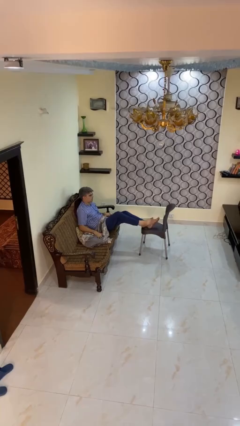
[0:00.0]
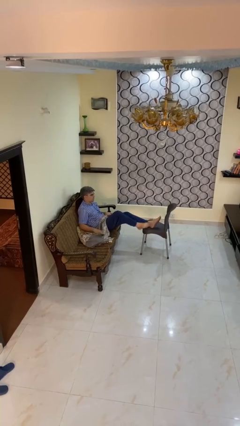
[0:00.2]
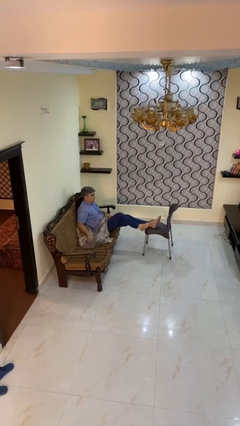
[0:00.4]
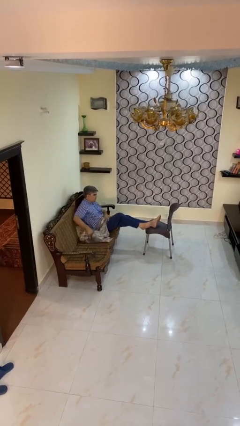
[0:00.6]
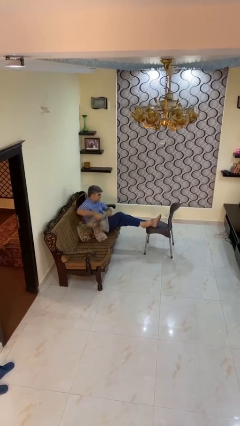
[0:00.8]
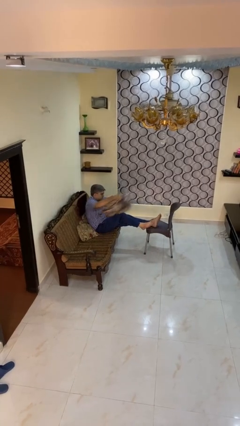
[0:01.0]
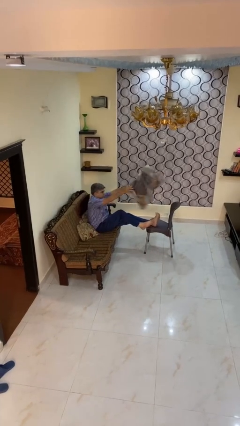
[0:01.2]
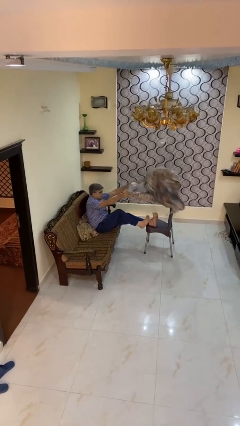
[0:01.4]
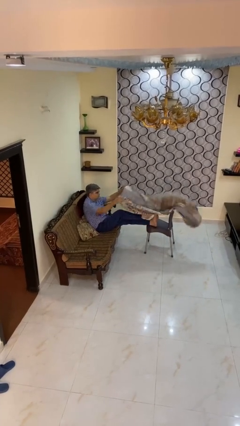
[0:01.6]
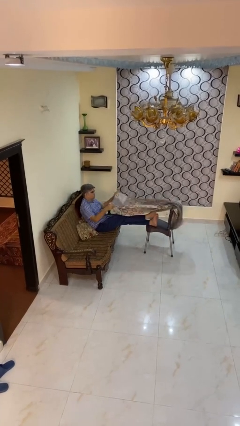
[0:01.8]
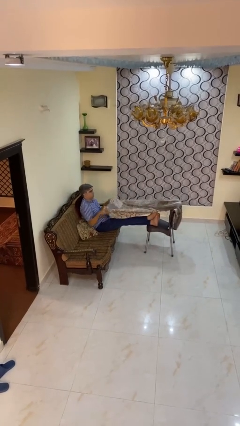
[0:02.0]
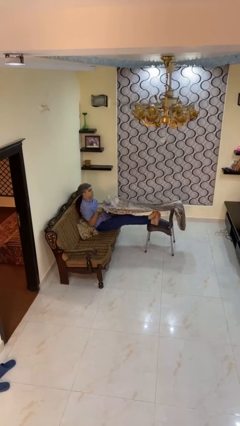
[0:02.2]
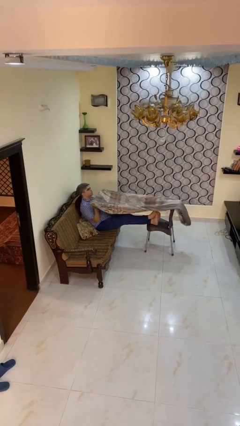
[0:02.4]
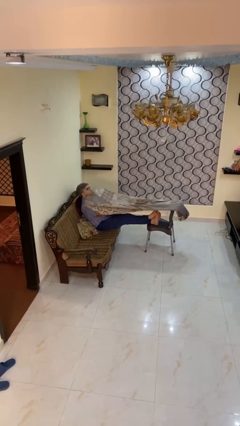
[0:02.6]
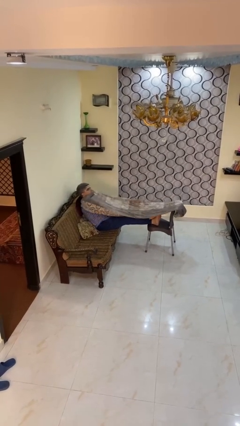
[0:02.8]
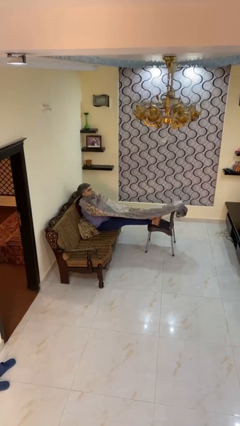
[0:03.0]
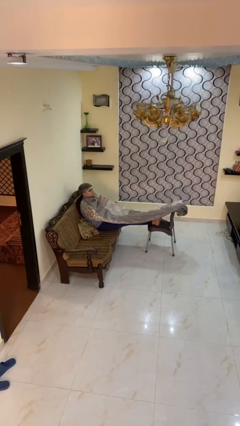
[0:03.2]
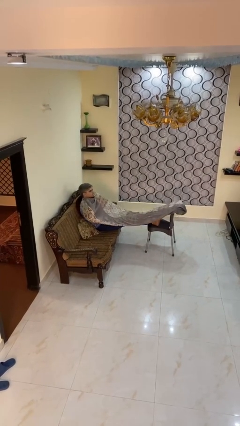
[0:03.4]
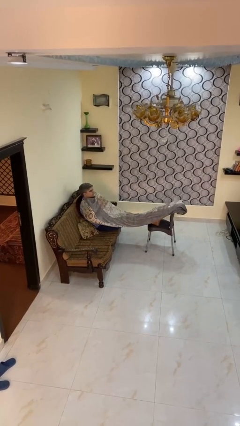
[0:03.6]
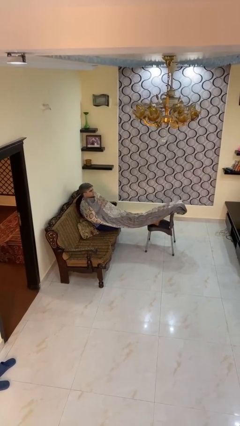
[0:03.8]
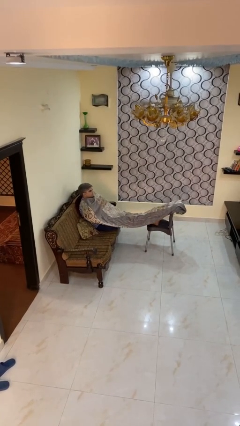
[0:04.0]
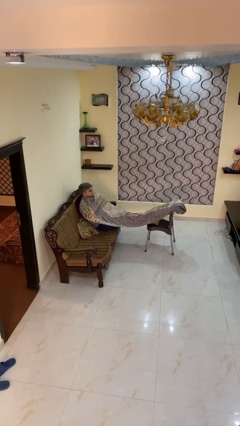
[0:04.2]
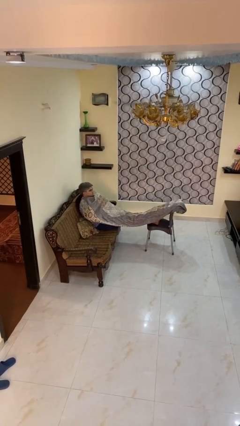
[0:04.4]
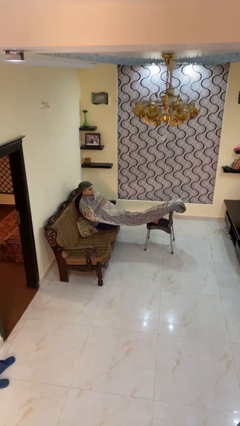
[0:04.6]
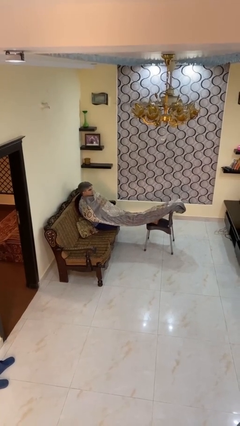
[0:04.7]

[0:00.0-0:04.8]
person covers with blanket

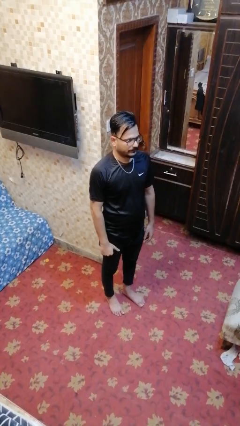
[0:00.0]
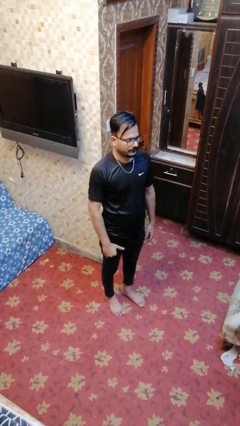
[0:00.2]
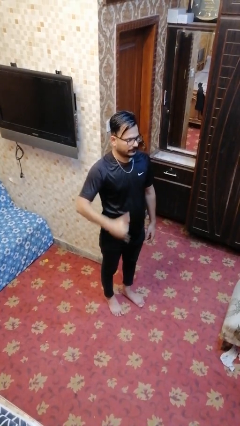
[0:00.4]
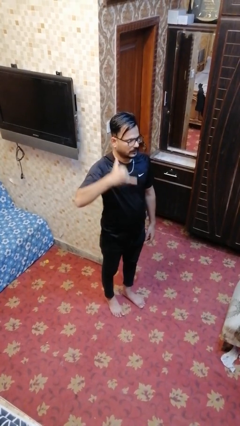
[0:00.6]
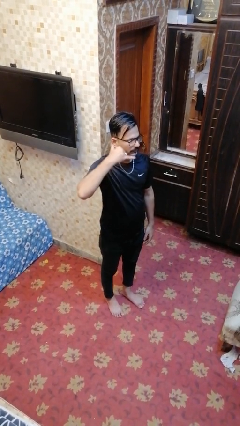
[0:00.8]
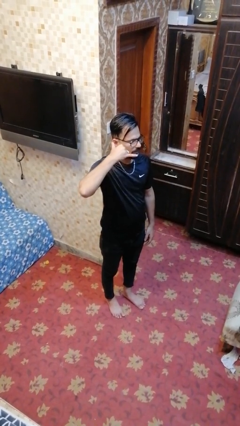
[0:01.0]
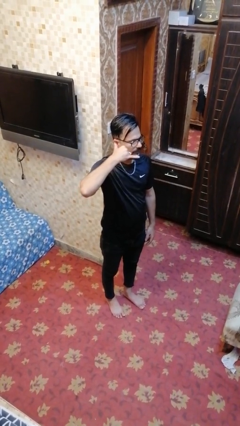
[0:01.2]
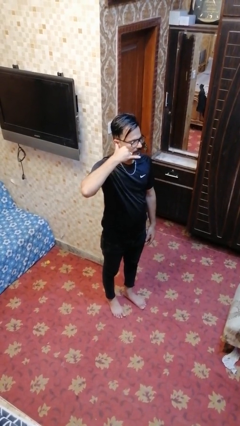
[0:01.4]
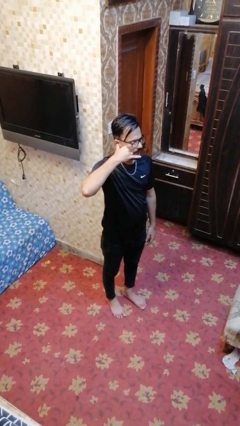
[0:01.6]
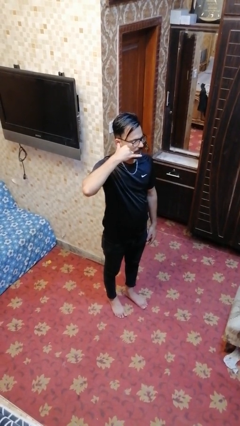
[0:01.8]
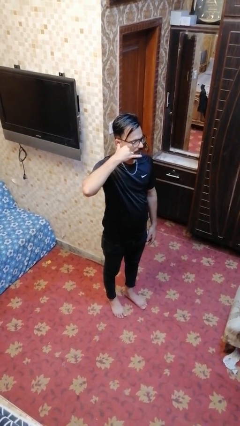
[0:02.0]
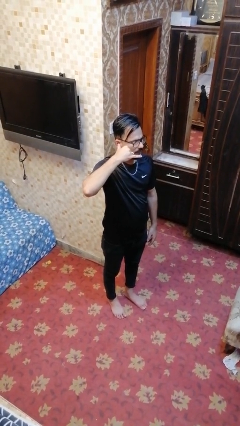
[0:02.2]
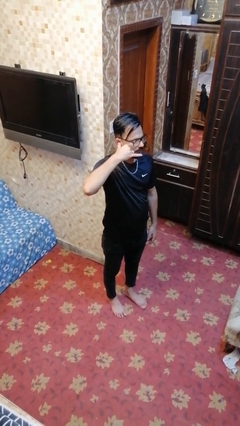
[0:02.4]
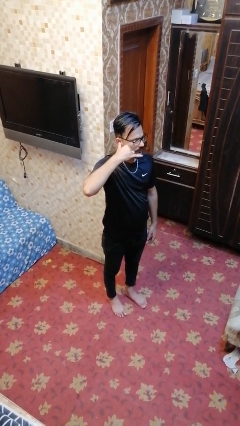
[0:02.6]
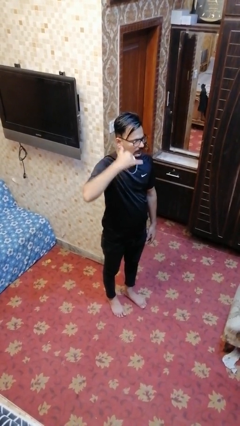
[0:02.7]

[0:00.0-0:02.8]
person gestures call me

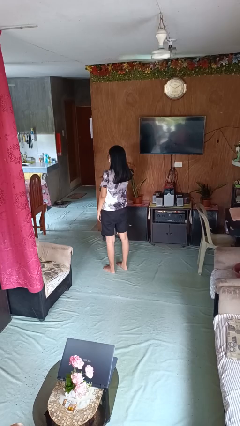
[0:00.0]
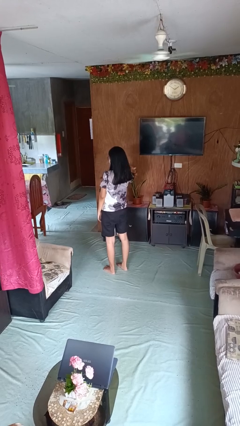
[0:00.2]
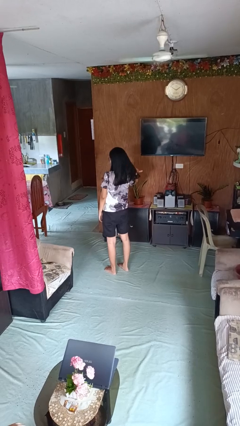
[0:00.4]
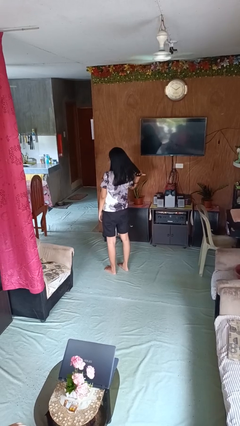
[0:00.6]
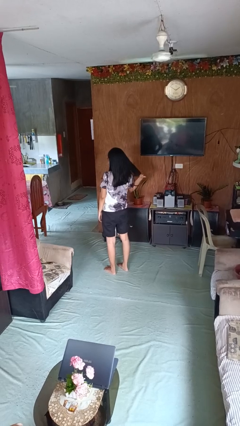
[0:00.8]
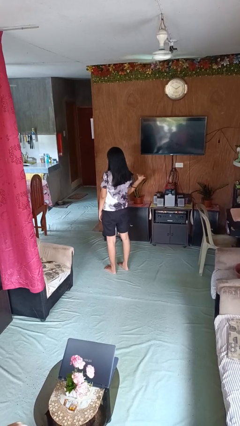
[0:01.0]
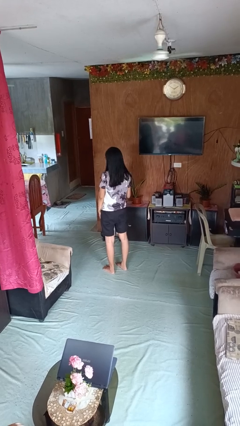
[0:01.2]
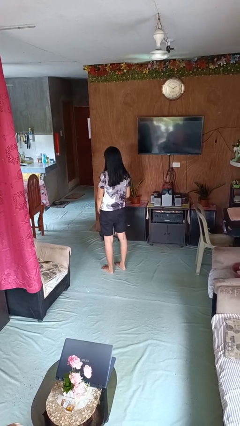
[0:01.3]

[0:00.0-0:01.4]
person strokes hair

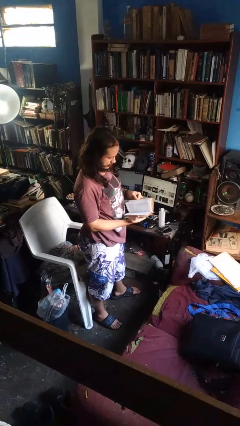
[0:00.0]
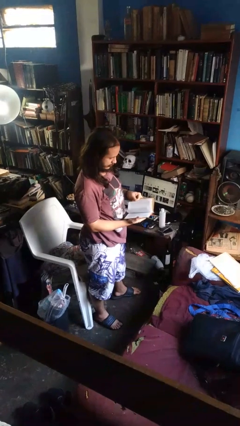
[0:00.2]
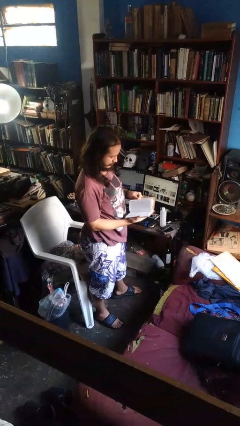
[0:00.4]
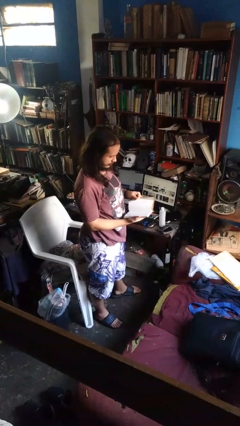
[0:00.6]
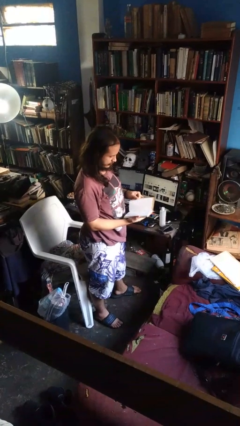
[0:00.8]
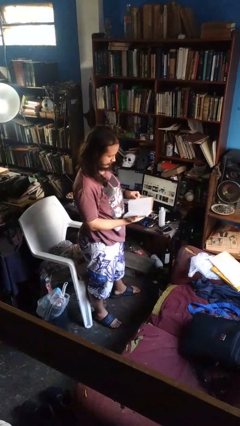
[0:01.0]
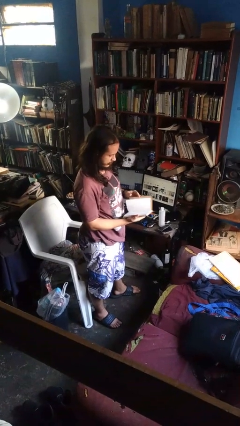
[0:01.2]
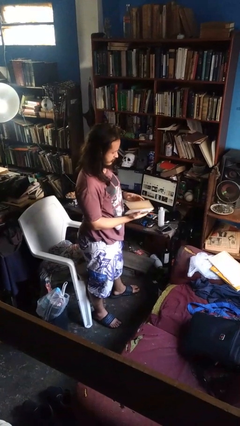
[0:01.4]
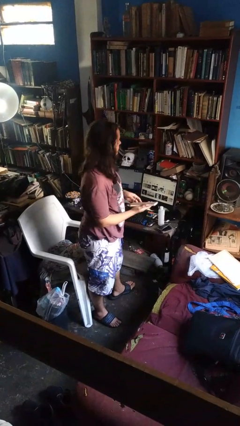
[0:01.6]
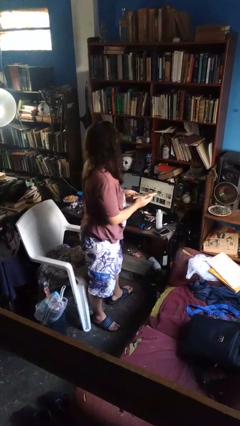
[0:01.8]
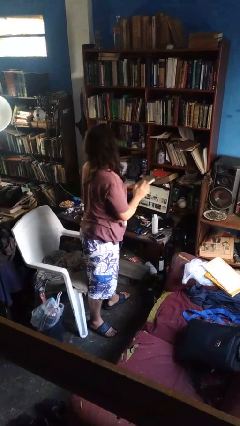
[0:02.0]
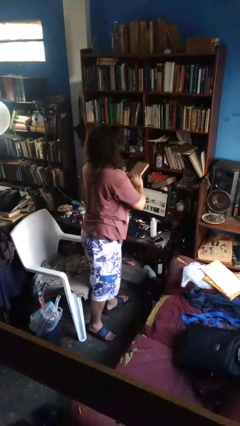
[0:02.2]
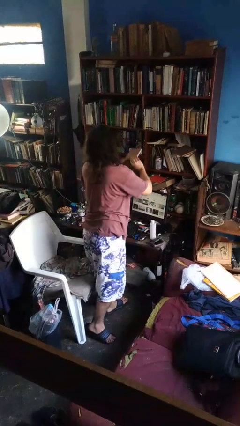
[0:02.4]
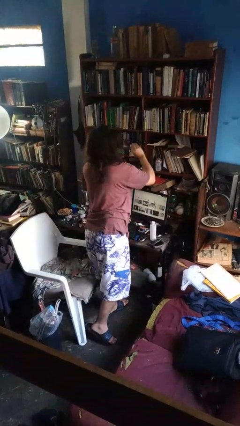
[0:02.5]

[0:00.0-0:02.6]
person puts down object on shelf

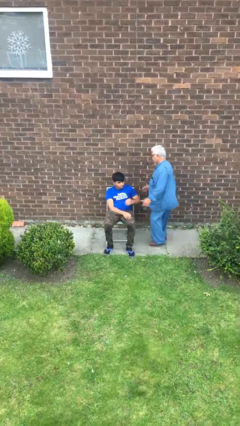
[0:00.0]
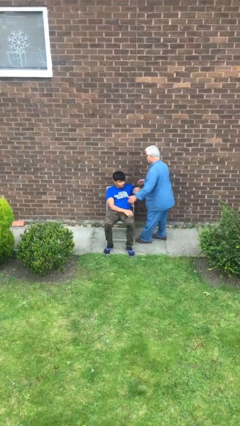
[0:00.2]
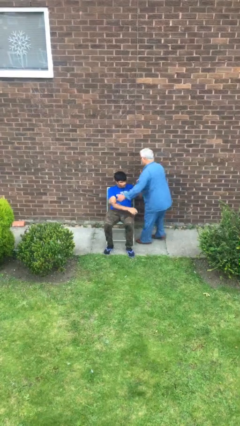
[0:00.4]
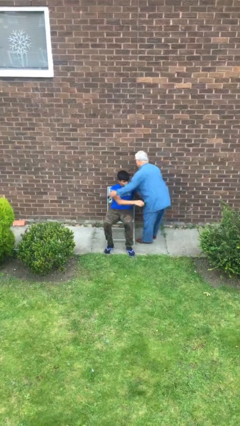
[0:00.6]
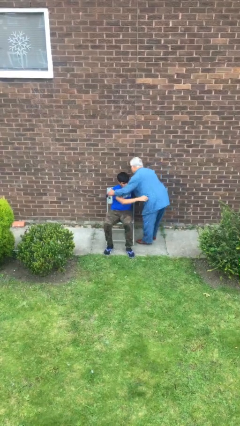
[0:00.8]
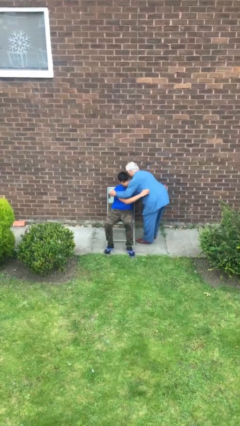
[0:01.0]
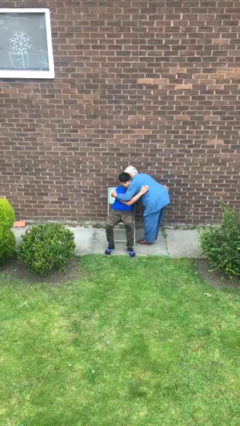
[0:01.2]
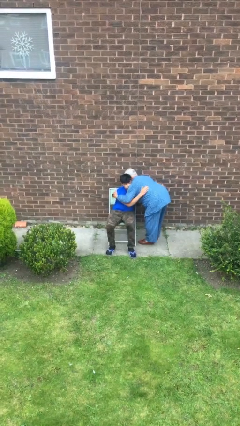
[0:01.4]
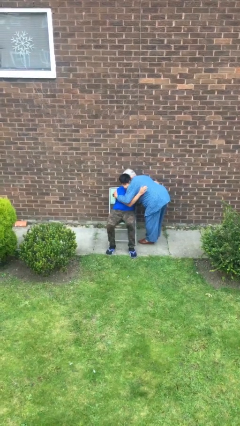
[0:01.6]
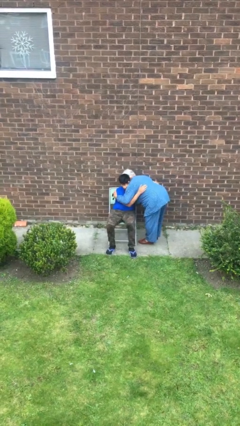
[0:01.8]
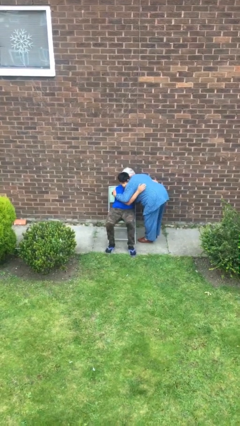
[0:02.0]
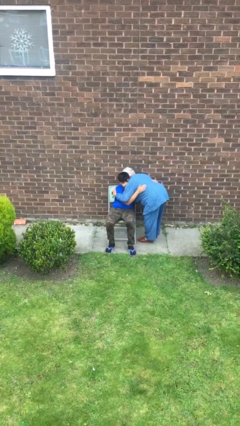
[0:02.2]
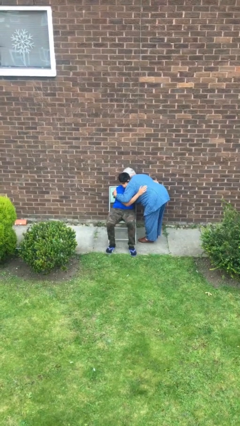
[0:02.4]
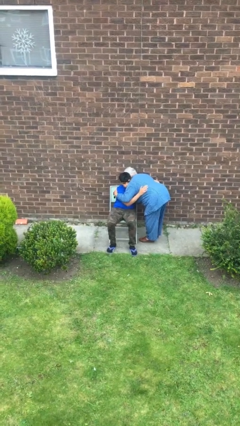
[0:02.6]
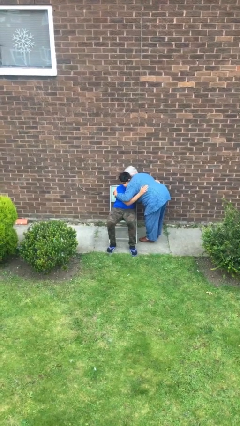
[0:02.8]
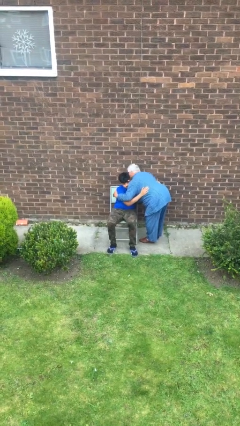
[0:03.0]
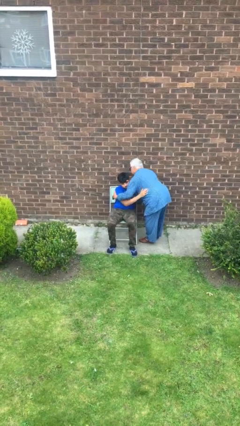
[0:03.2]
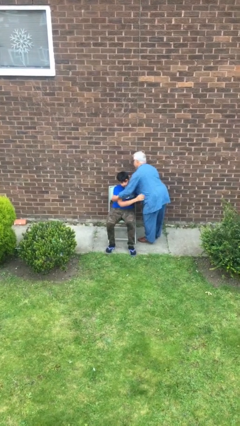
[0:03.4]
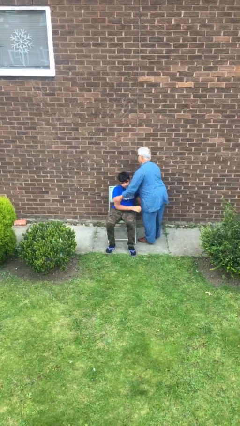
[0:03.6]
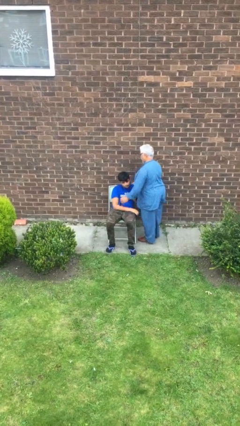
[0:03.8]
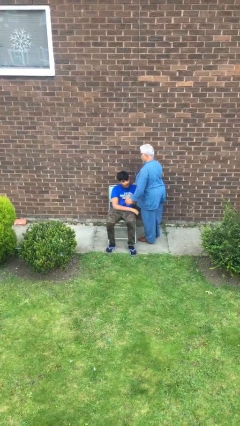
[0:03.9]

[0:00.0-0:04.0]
person embraces person

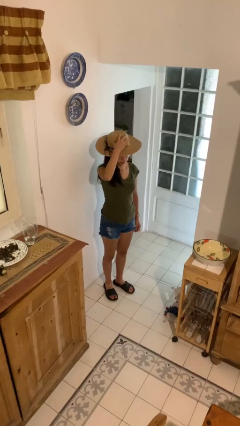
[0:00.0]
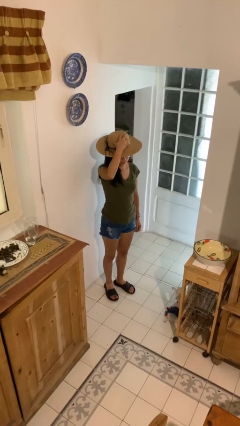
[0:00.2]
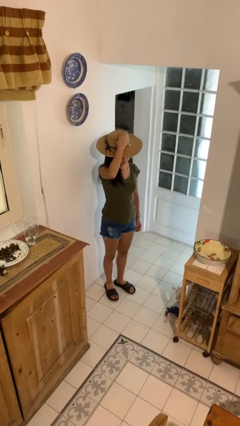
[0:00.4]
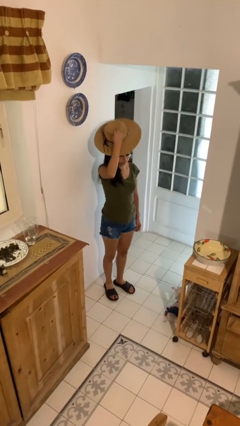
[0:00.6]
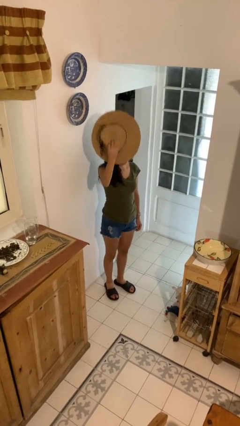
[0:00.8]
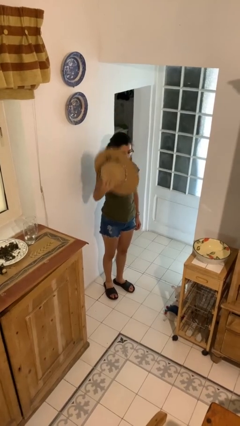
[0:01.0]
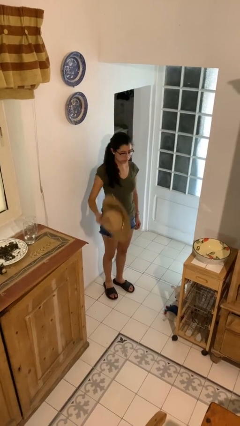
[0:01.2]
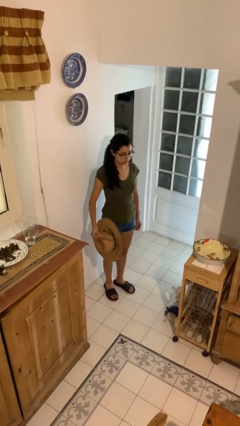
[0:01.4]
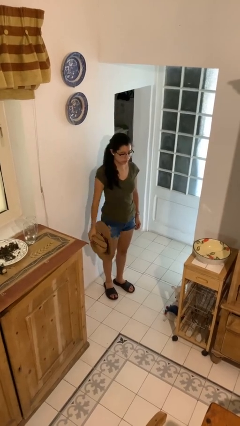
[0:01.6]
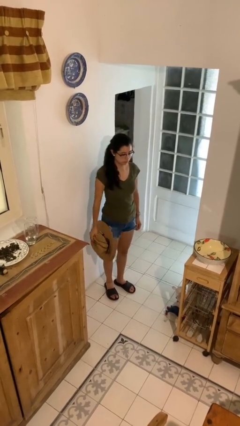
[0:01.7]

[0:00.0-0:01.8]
person takes off hat

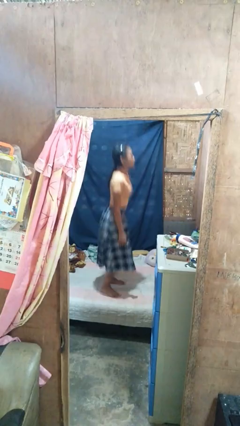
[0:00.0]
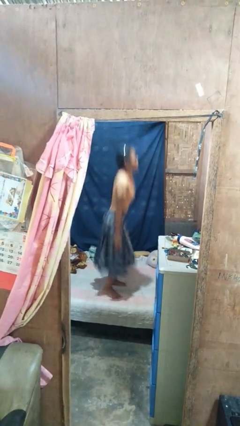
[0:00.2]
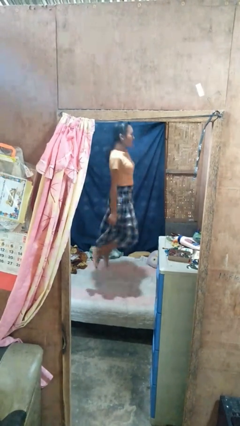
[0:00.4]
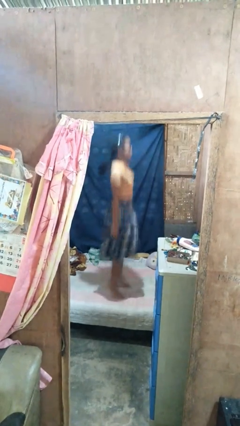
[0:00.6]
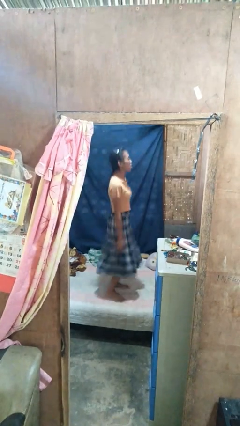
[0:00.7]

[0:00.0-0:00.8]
person jumps on bed
